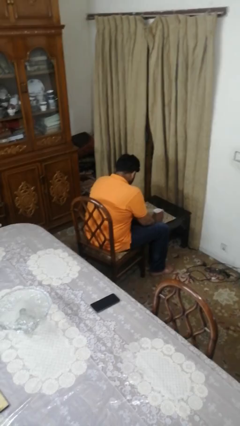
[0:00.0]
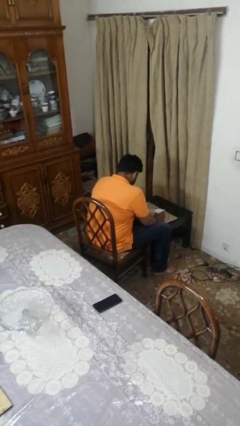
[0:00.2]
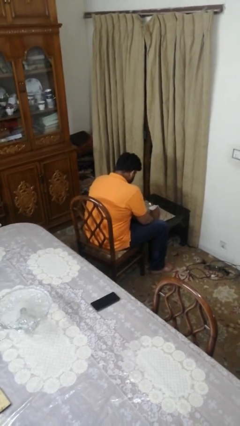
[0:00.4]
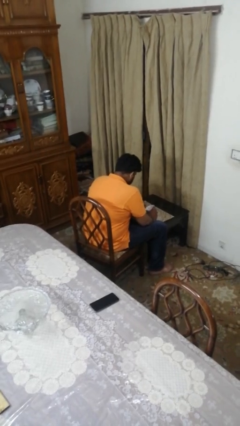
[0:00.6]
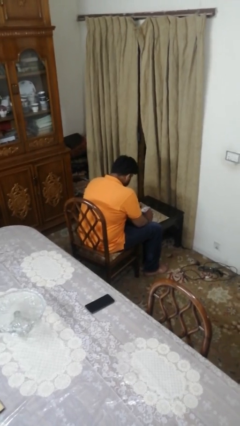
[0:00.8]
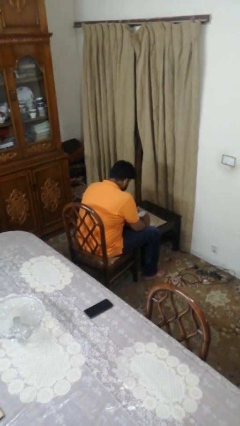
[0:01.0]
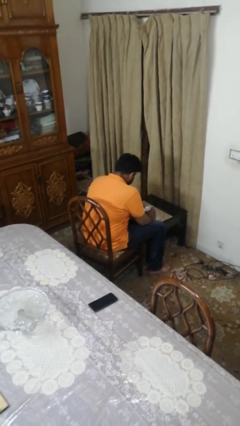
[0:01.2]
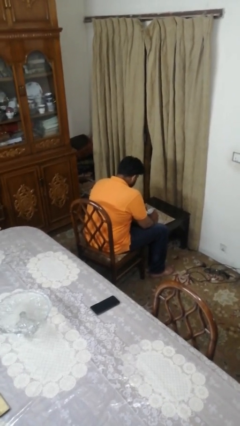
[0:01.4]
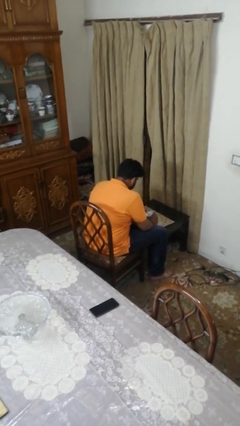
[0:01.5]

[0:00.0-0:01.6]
person stirs mug

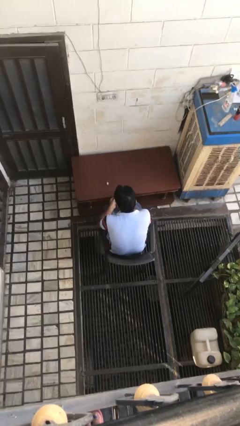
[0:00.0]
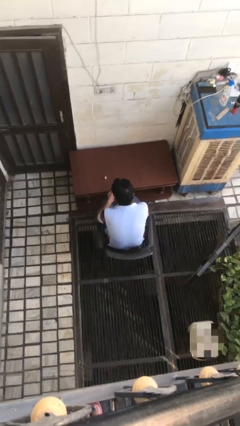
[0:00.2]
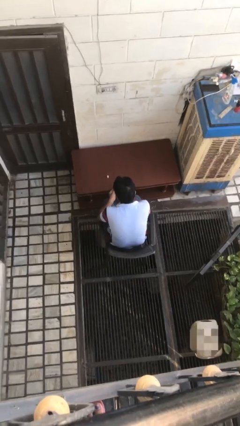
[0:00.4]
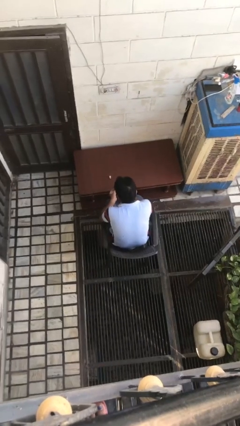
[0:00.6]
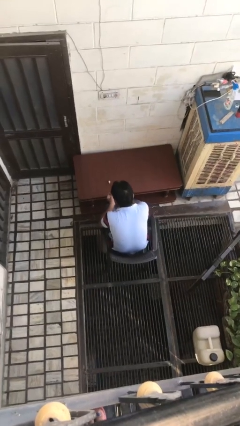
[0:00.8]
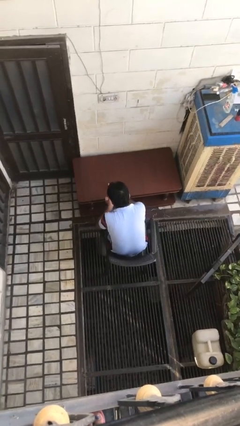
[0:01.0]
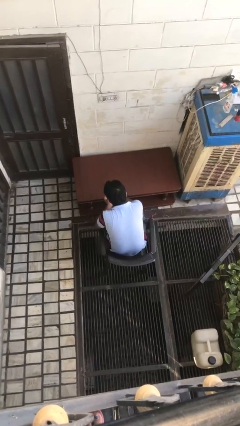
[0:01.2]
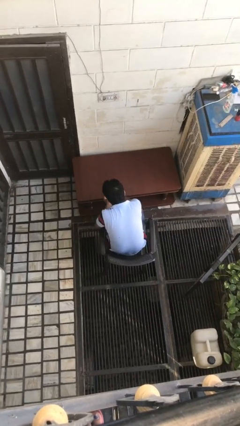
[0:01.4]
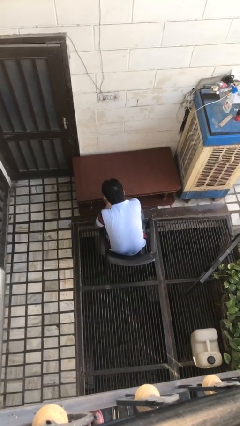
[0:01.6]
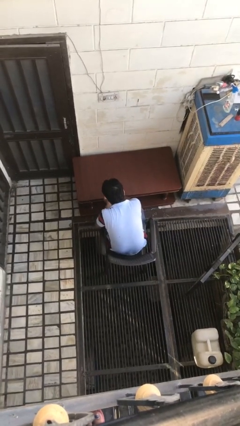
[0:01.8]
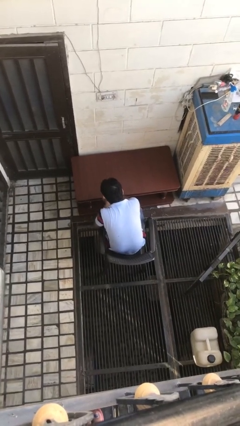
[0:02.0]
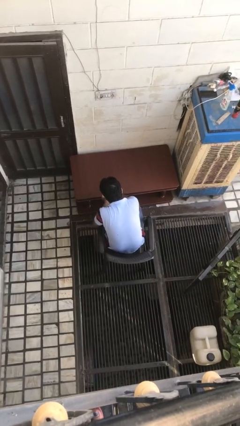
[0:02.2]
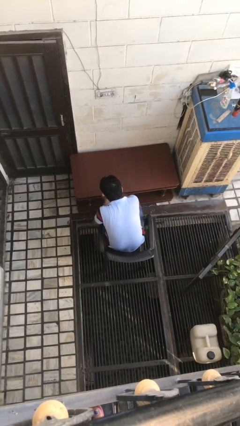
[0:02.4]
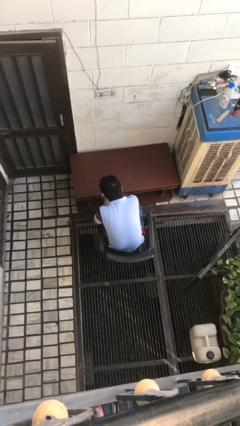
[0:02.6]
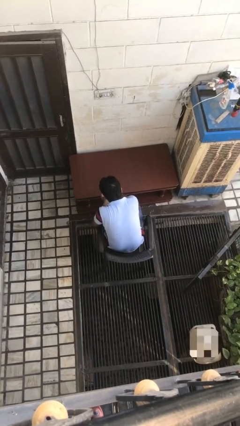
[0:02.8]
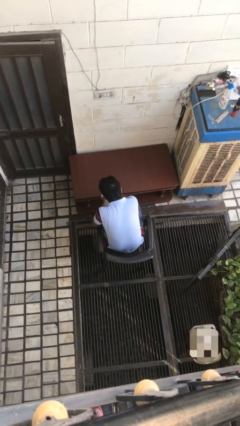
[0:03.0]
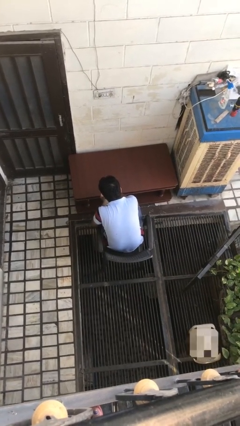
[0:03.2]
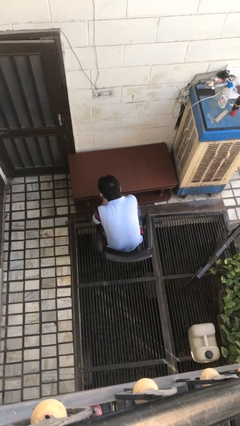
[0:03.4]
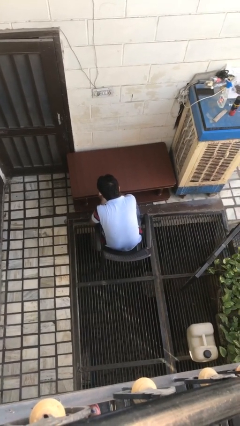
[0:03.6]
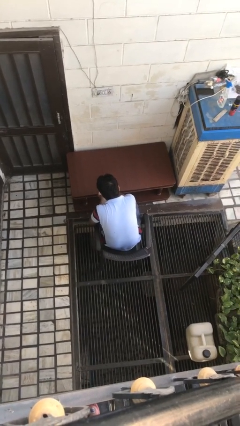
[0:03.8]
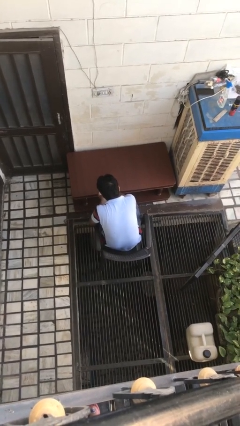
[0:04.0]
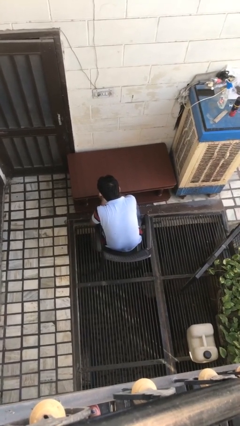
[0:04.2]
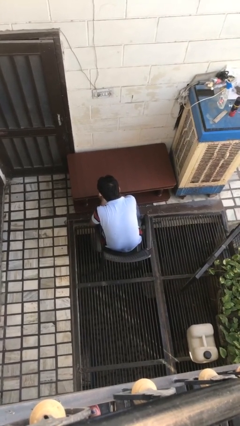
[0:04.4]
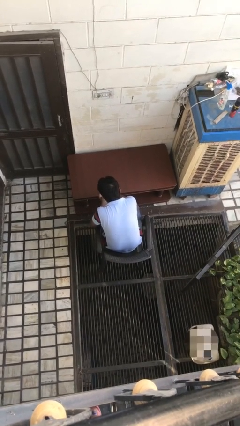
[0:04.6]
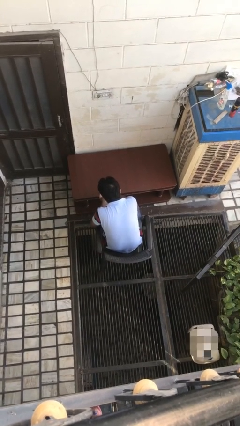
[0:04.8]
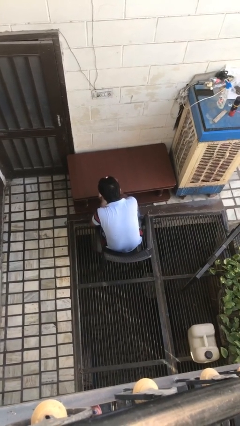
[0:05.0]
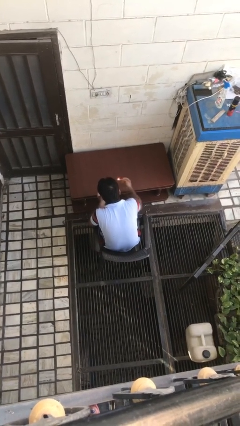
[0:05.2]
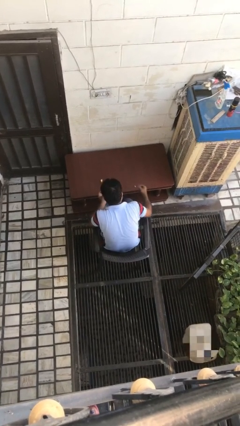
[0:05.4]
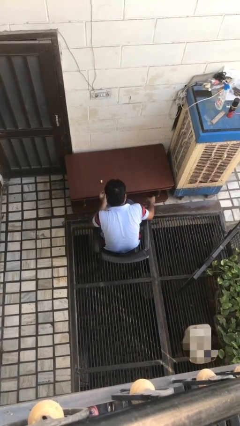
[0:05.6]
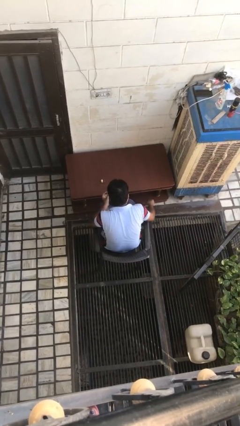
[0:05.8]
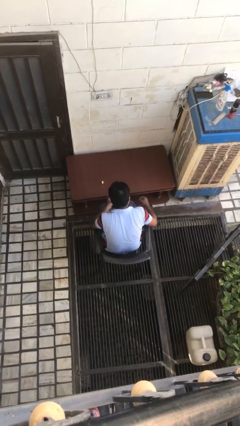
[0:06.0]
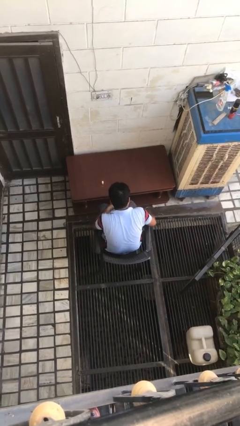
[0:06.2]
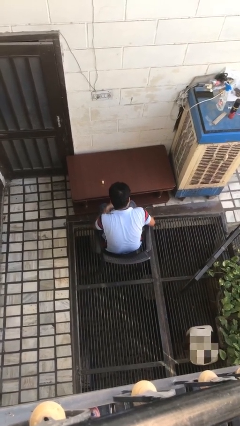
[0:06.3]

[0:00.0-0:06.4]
person lights candle

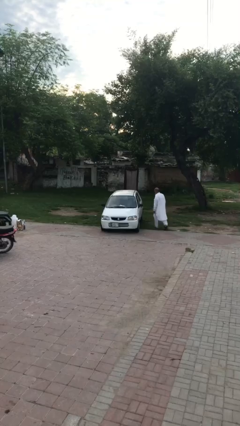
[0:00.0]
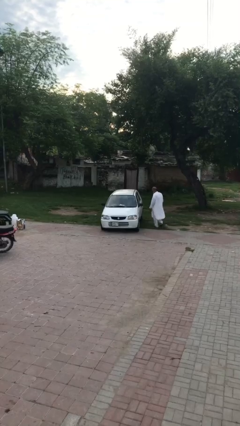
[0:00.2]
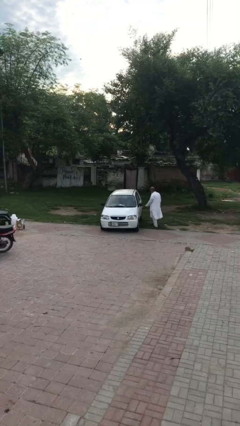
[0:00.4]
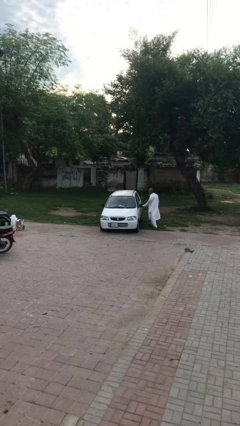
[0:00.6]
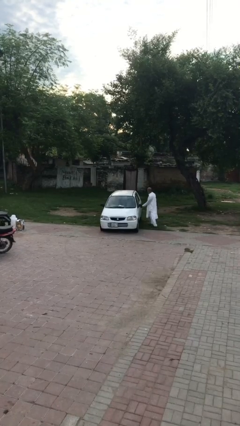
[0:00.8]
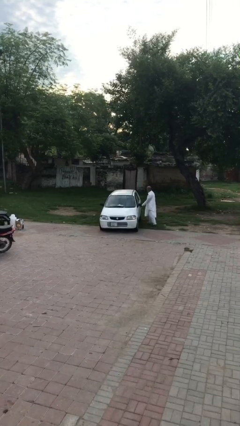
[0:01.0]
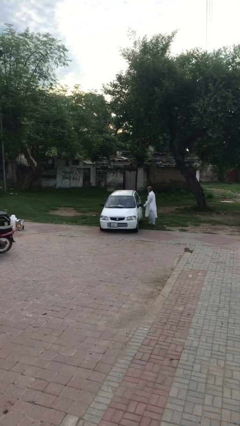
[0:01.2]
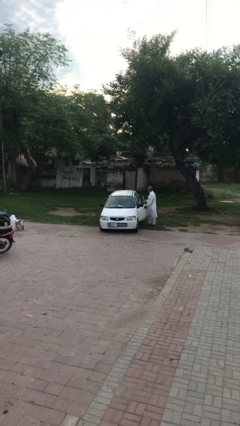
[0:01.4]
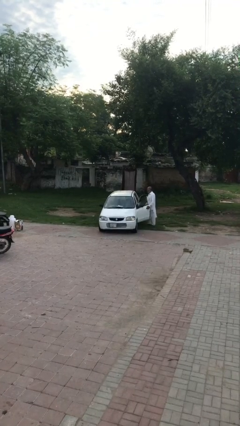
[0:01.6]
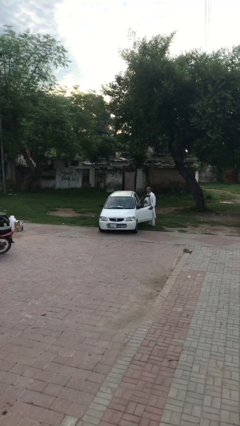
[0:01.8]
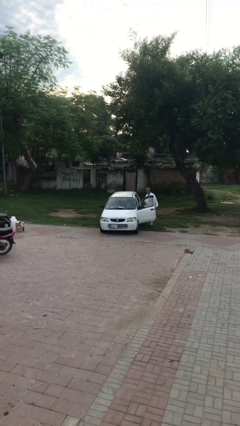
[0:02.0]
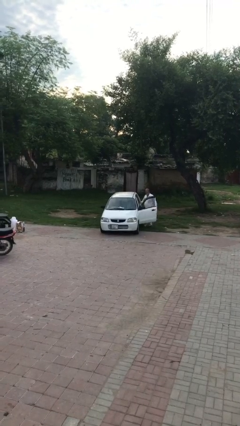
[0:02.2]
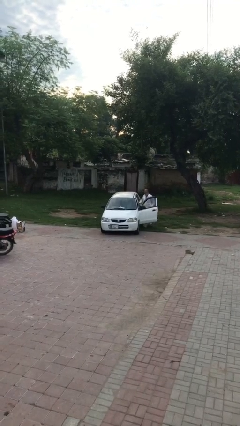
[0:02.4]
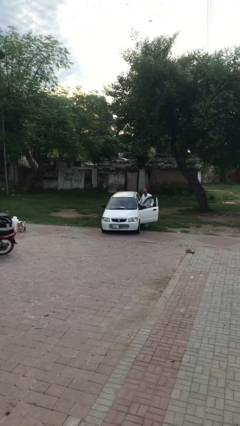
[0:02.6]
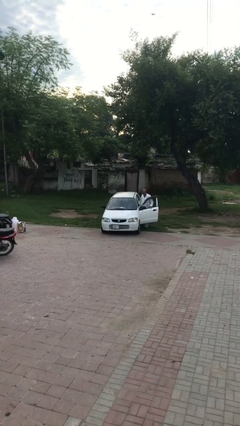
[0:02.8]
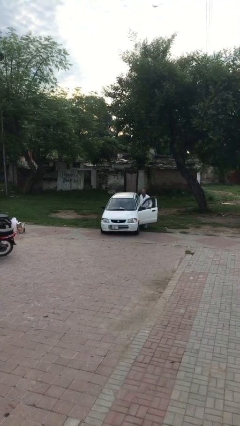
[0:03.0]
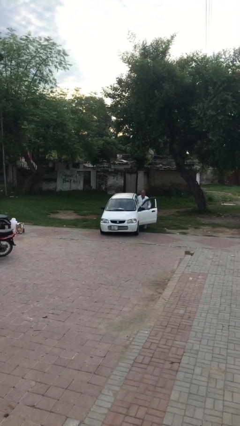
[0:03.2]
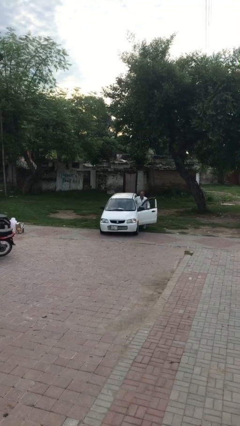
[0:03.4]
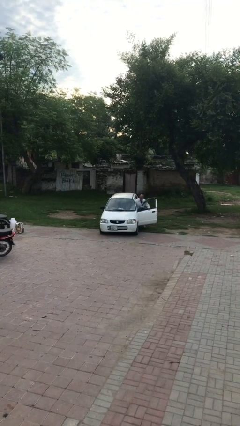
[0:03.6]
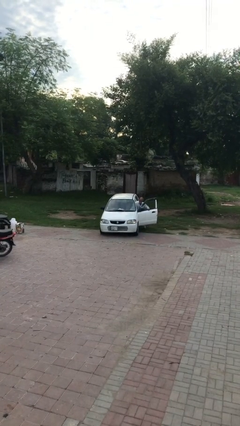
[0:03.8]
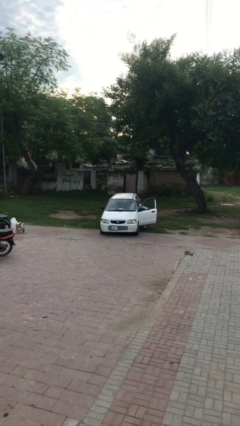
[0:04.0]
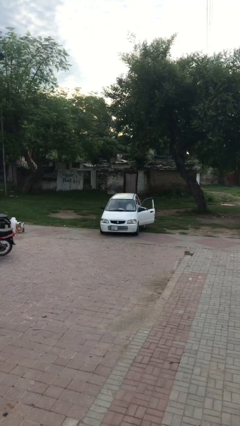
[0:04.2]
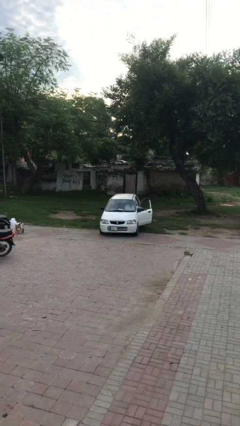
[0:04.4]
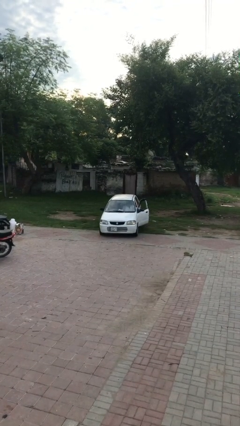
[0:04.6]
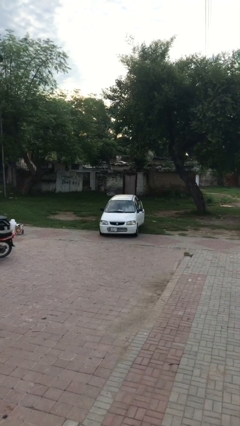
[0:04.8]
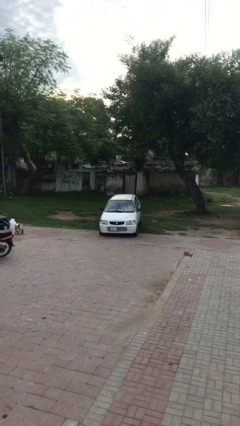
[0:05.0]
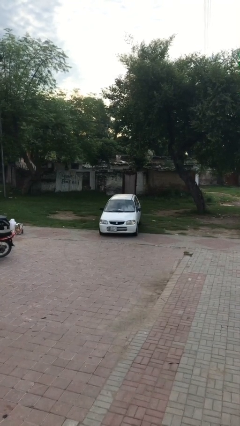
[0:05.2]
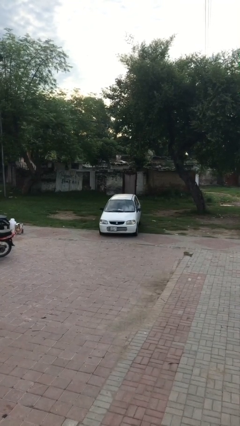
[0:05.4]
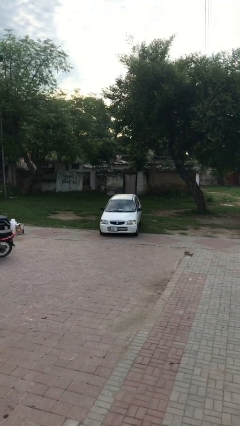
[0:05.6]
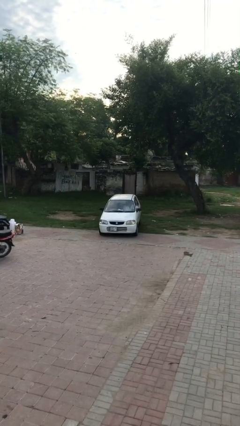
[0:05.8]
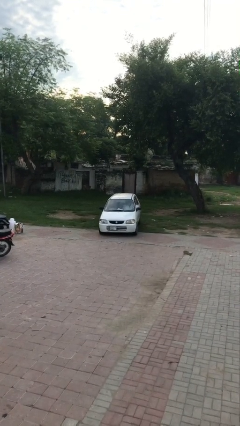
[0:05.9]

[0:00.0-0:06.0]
car picks up person

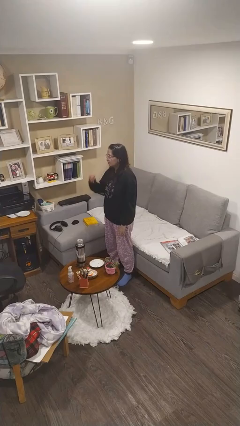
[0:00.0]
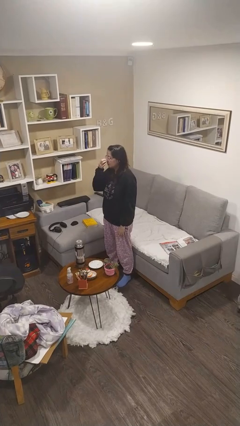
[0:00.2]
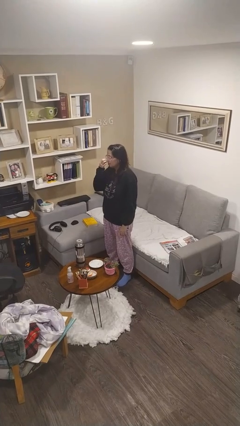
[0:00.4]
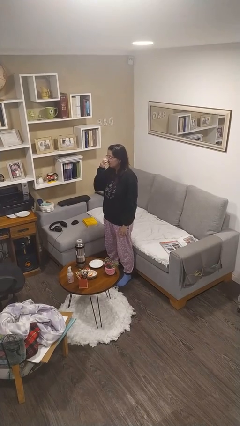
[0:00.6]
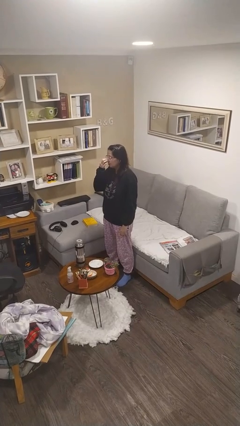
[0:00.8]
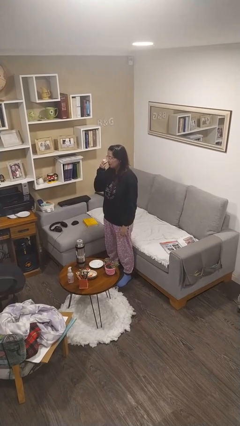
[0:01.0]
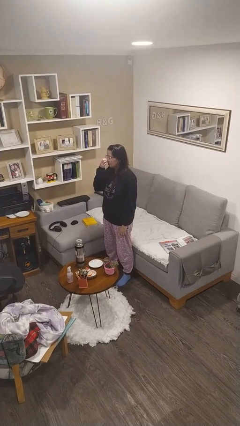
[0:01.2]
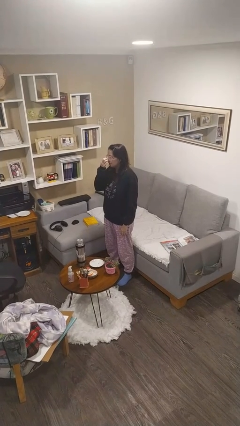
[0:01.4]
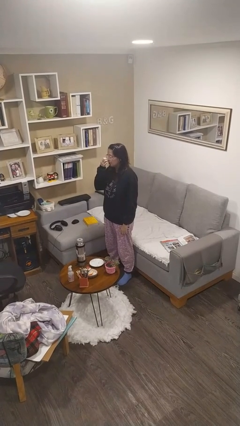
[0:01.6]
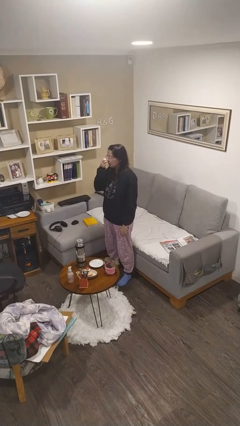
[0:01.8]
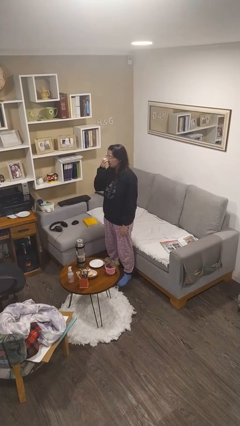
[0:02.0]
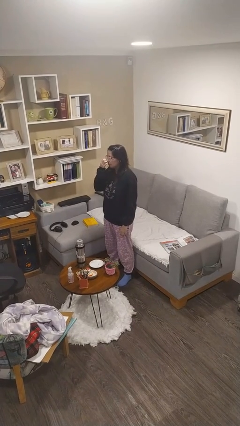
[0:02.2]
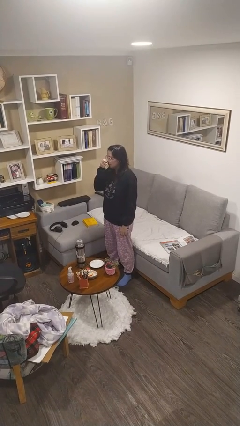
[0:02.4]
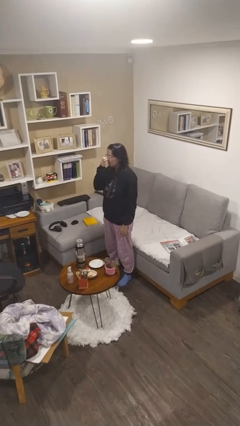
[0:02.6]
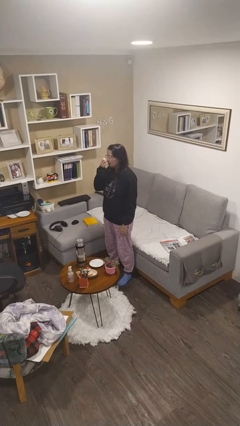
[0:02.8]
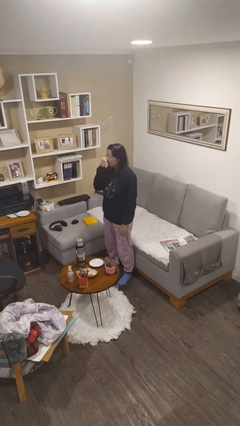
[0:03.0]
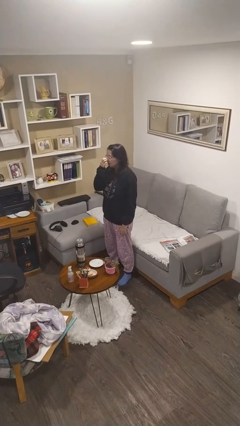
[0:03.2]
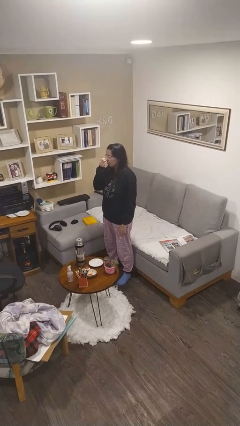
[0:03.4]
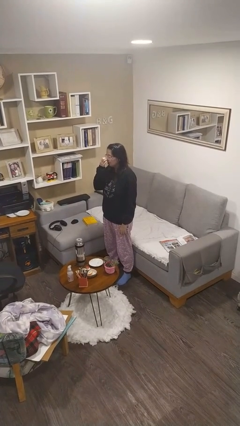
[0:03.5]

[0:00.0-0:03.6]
person scratches face
